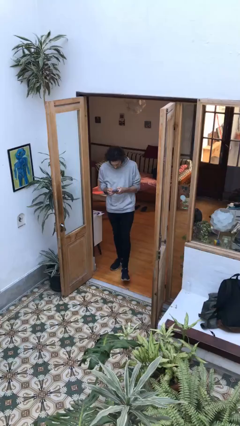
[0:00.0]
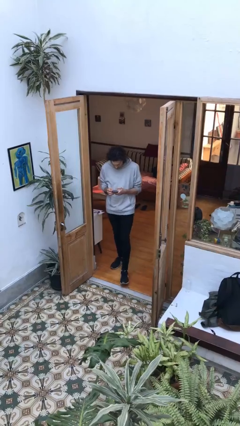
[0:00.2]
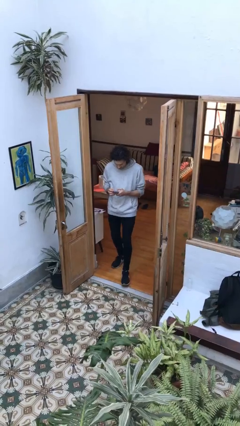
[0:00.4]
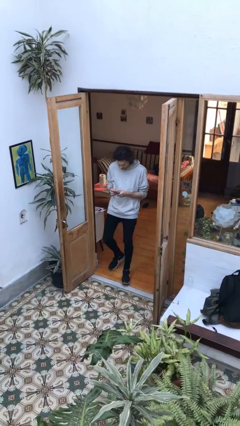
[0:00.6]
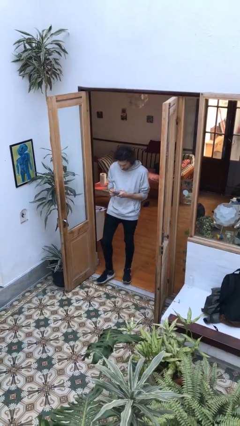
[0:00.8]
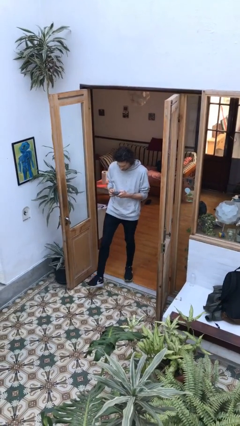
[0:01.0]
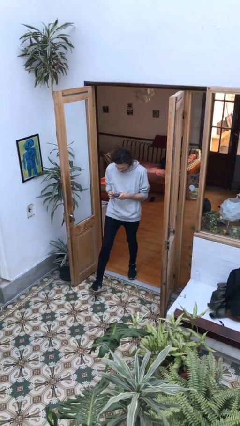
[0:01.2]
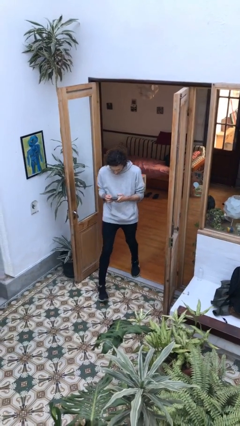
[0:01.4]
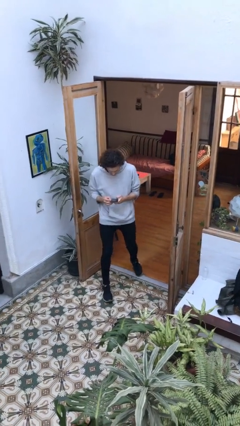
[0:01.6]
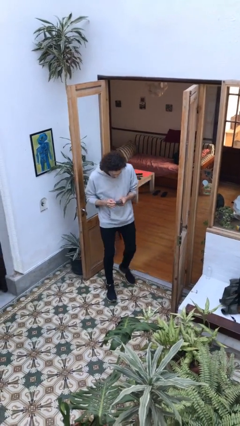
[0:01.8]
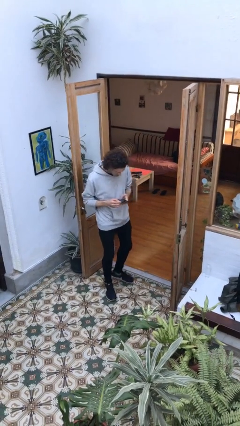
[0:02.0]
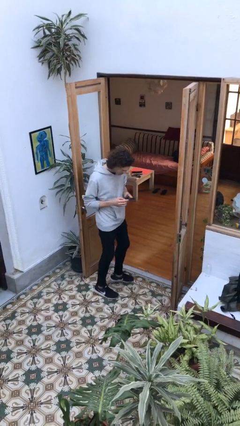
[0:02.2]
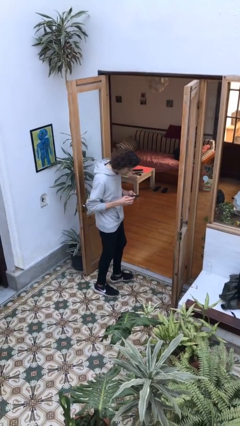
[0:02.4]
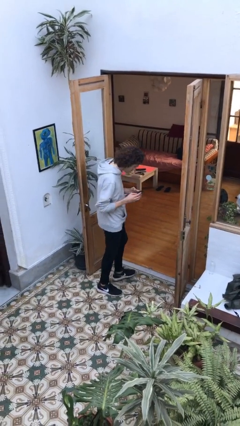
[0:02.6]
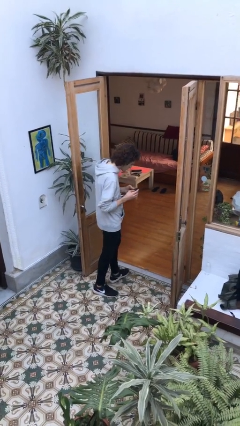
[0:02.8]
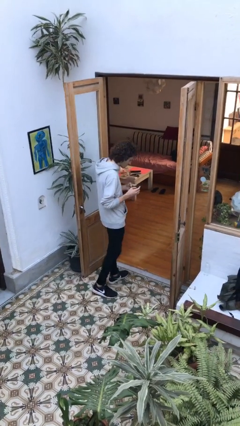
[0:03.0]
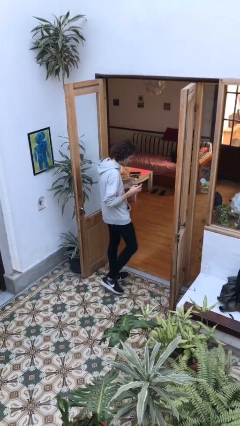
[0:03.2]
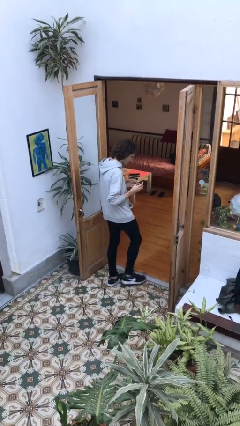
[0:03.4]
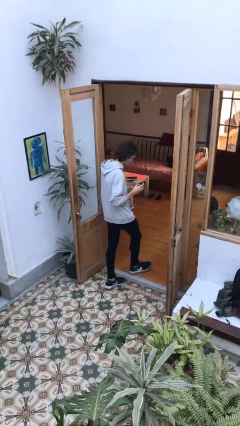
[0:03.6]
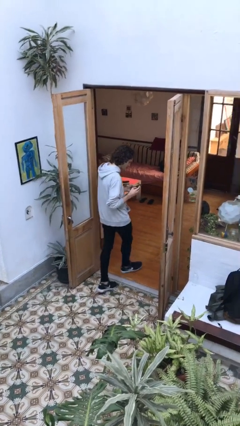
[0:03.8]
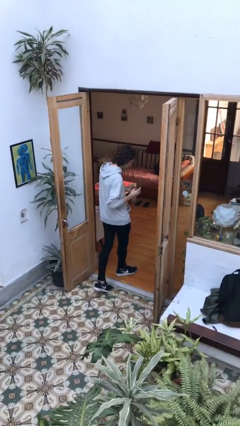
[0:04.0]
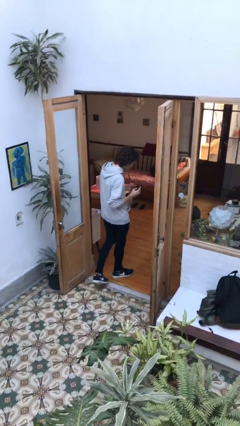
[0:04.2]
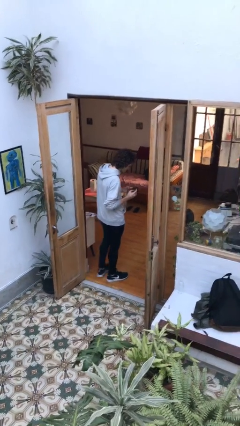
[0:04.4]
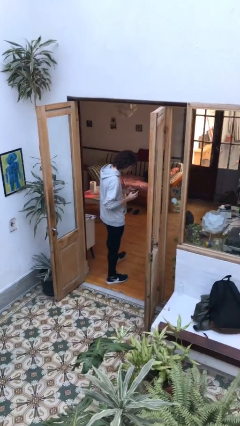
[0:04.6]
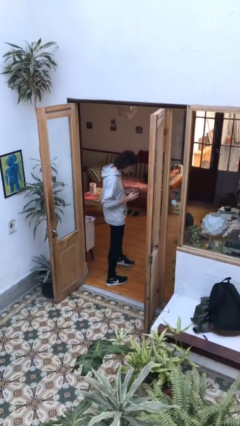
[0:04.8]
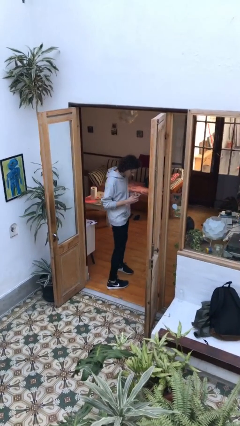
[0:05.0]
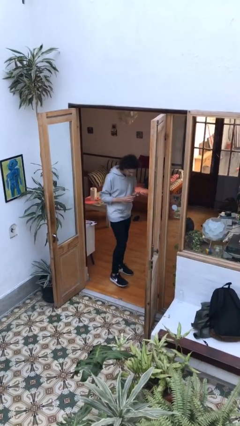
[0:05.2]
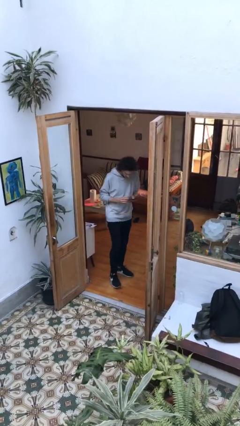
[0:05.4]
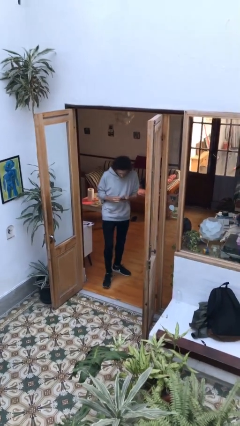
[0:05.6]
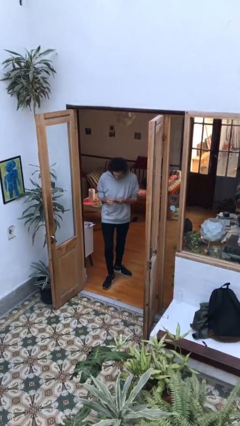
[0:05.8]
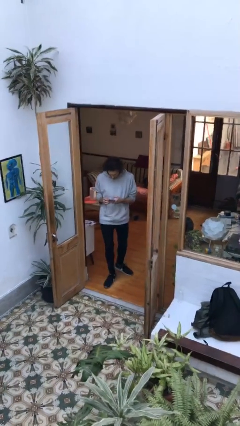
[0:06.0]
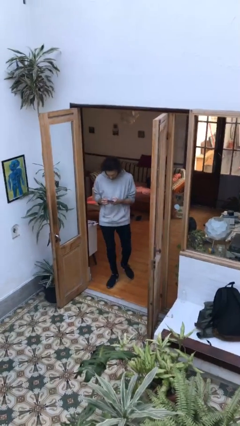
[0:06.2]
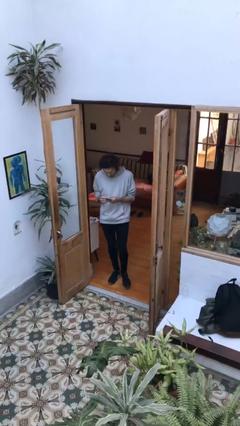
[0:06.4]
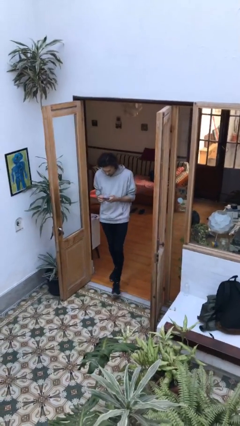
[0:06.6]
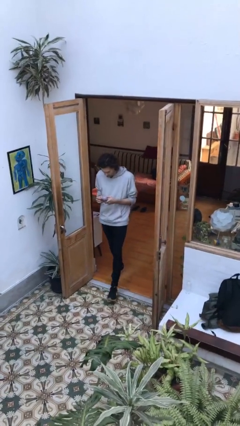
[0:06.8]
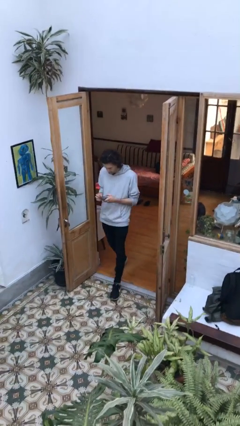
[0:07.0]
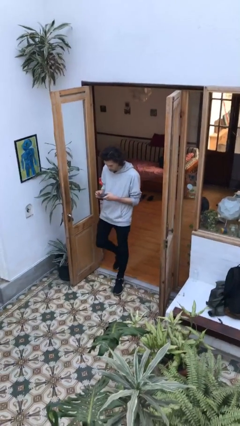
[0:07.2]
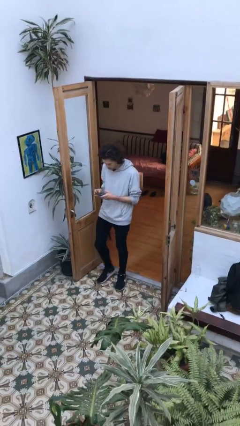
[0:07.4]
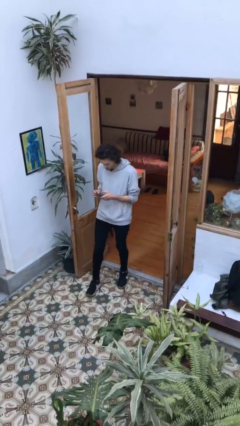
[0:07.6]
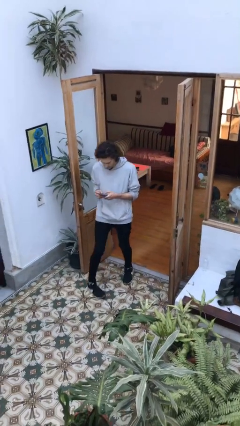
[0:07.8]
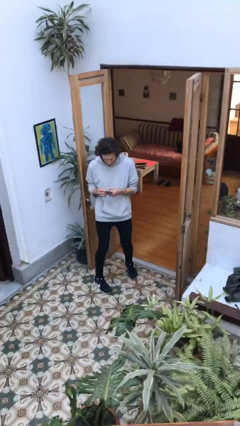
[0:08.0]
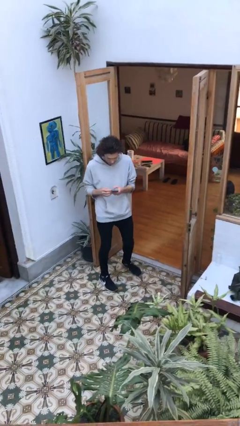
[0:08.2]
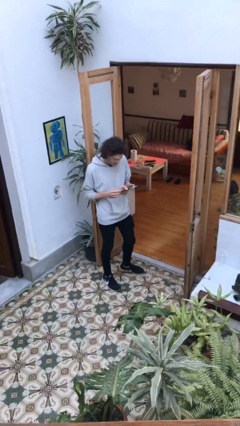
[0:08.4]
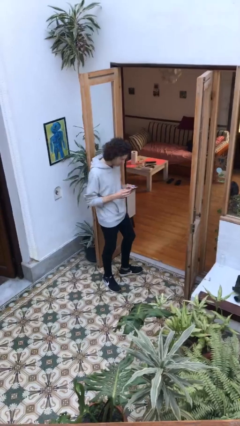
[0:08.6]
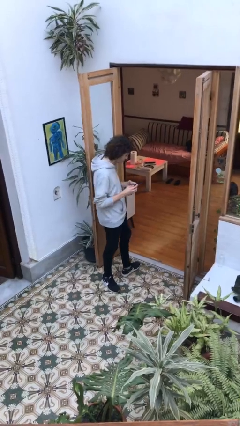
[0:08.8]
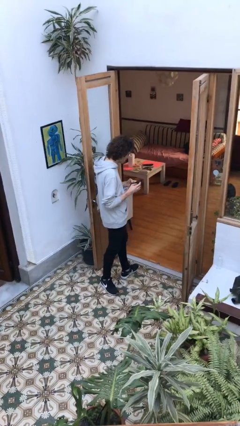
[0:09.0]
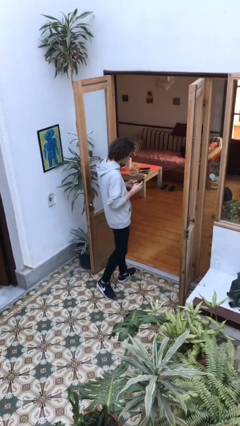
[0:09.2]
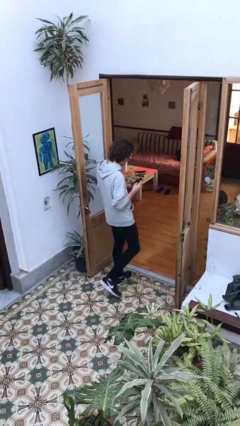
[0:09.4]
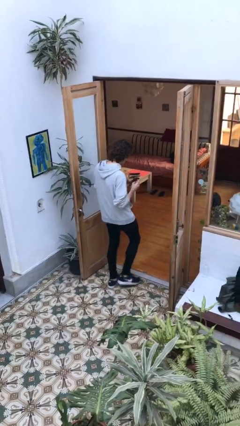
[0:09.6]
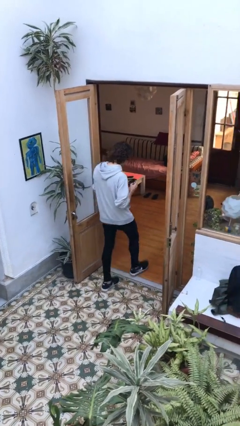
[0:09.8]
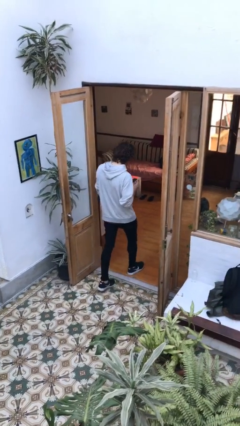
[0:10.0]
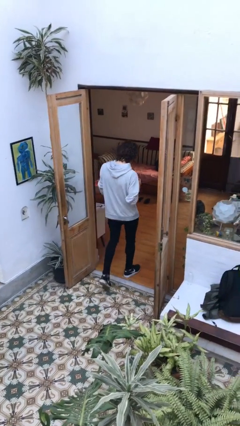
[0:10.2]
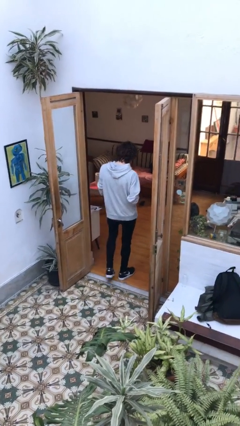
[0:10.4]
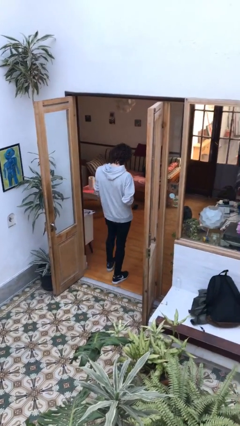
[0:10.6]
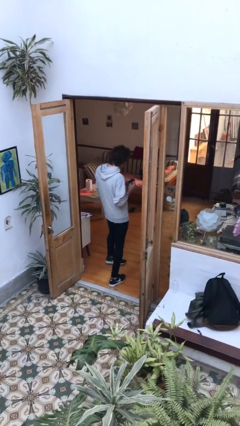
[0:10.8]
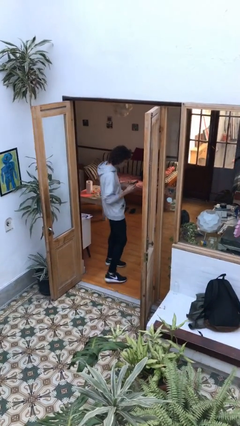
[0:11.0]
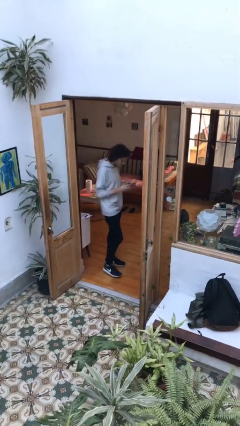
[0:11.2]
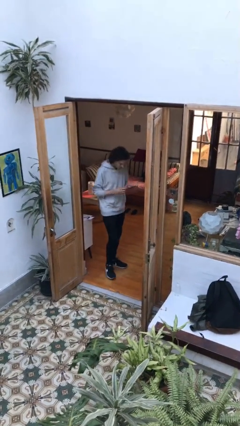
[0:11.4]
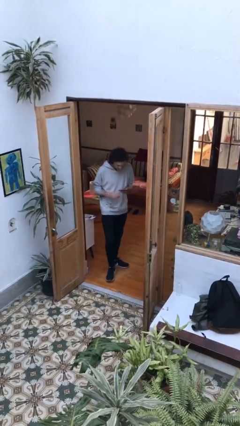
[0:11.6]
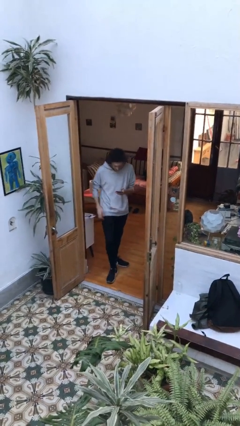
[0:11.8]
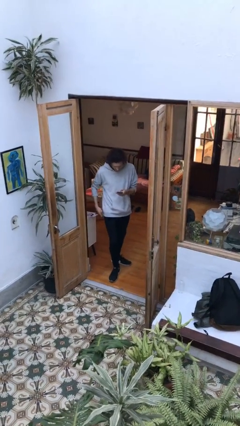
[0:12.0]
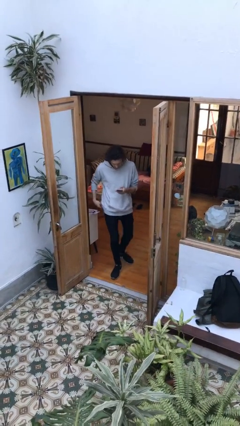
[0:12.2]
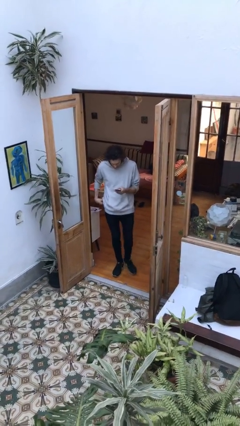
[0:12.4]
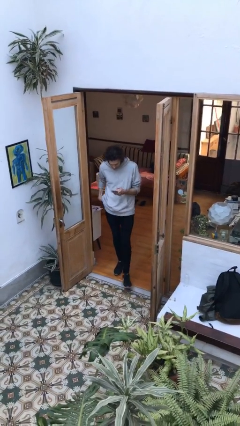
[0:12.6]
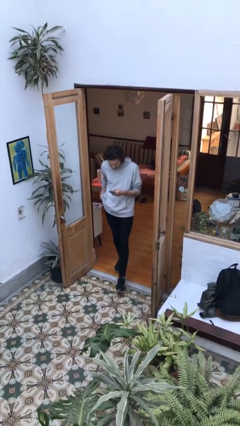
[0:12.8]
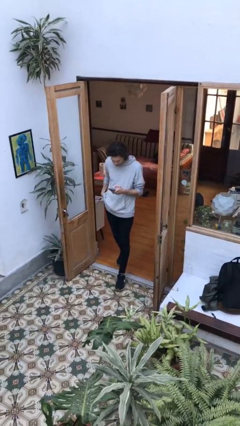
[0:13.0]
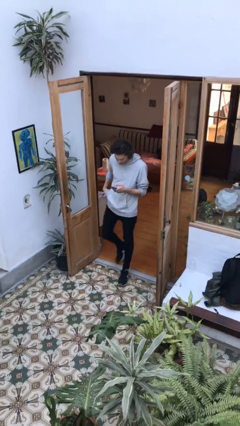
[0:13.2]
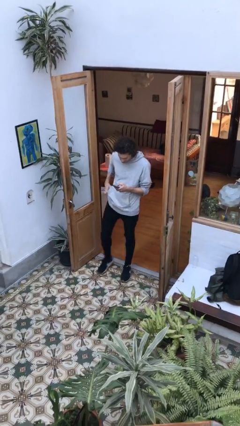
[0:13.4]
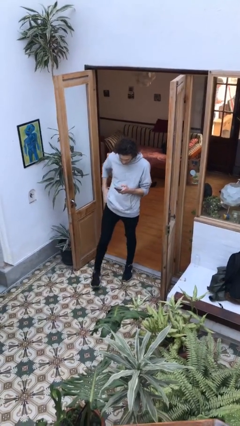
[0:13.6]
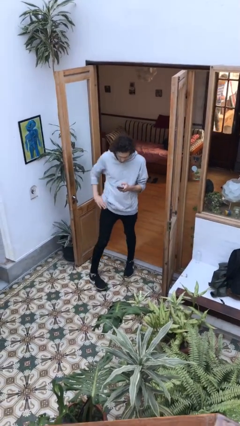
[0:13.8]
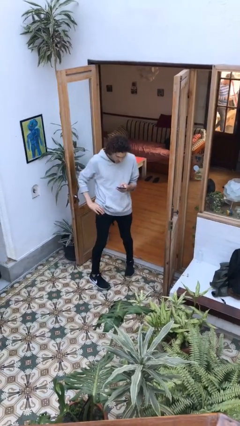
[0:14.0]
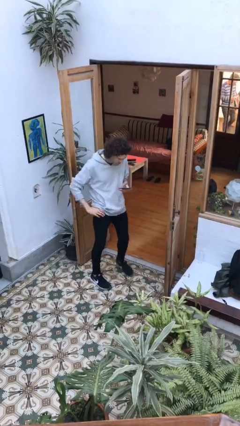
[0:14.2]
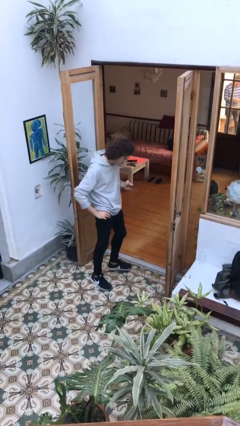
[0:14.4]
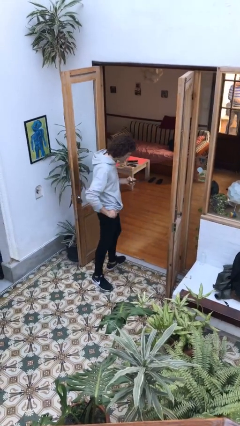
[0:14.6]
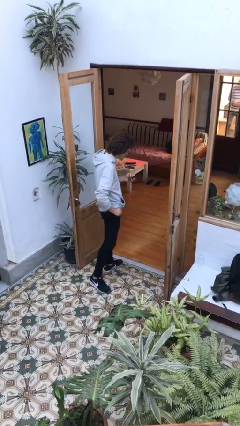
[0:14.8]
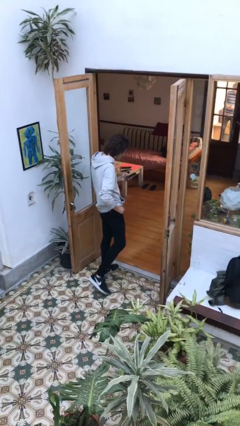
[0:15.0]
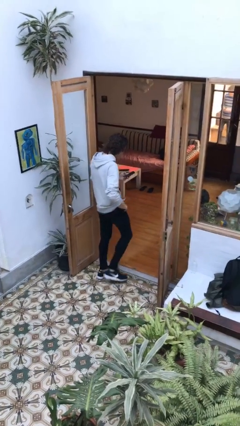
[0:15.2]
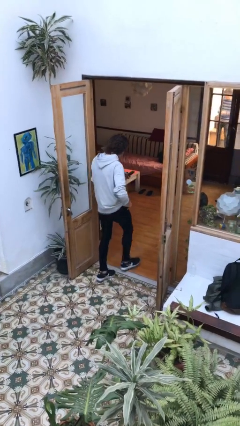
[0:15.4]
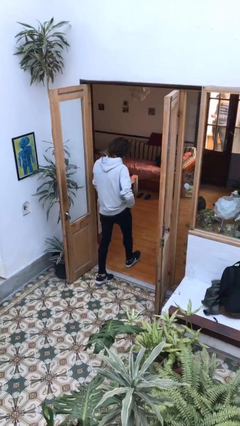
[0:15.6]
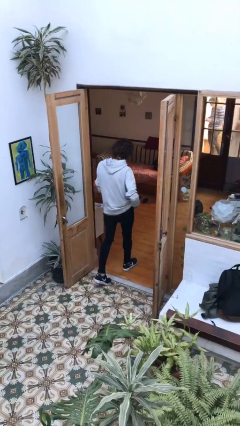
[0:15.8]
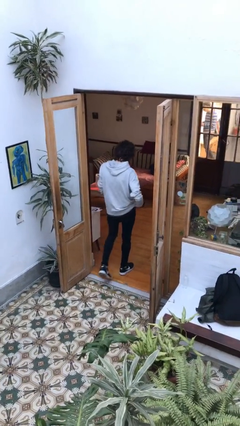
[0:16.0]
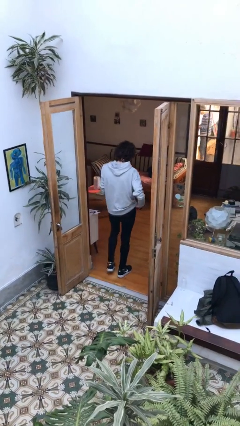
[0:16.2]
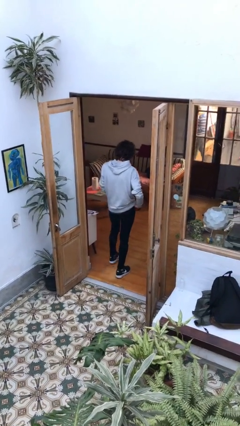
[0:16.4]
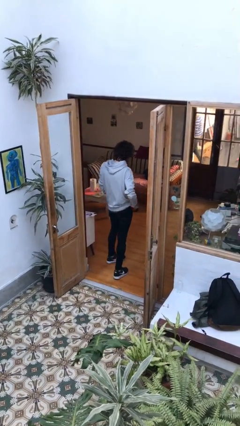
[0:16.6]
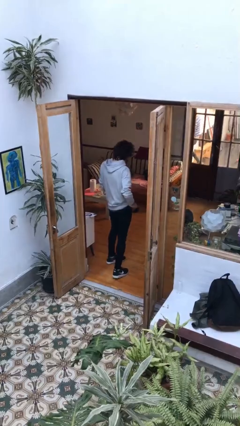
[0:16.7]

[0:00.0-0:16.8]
person texts on phone

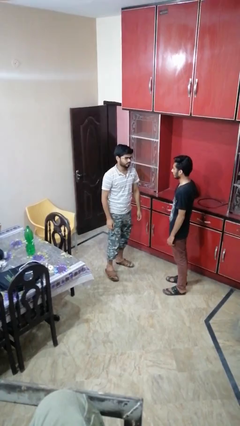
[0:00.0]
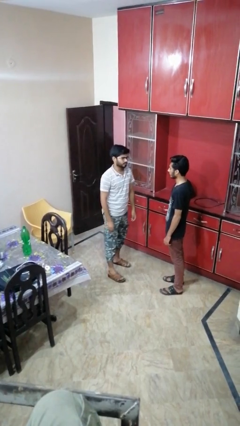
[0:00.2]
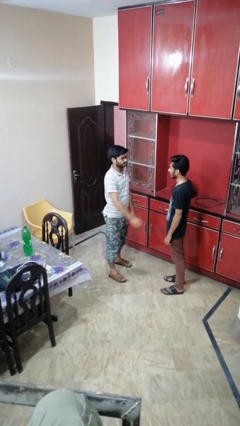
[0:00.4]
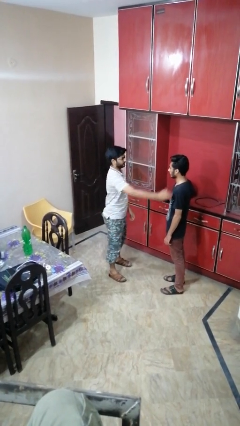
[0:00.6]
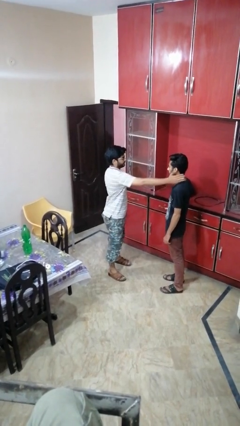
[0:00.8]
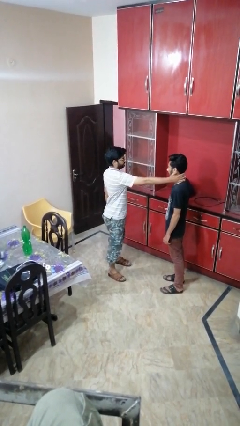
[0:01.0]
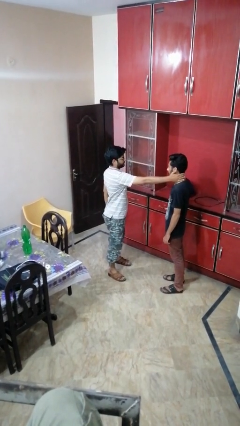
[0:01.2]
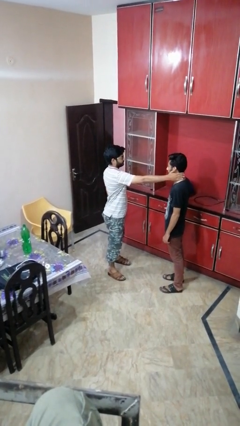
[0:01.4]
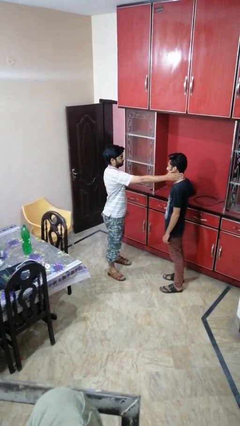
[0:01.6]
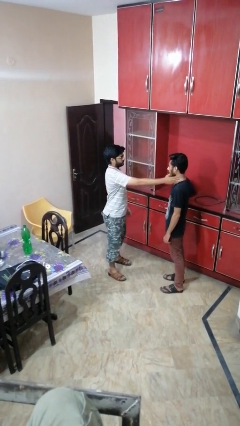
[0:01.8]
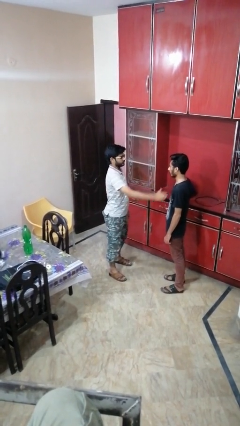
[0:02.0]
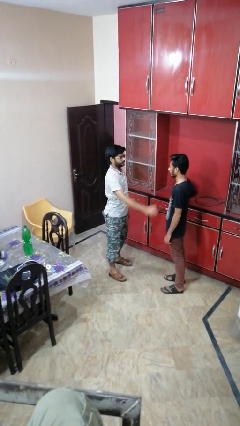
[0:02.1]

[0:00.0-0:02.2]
person touches face of person
